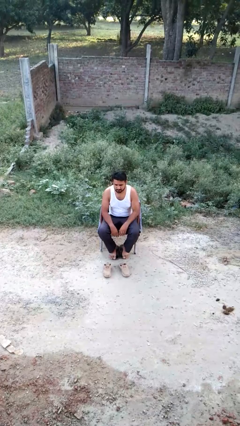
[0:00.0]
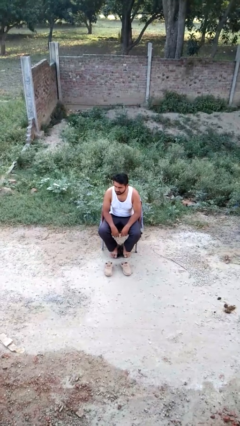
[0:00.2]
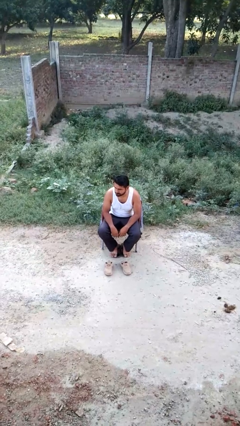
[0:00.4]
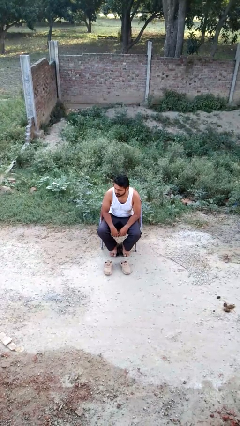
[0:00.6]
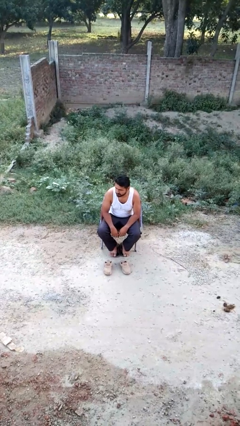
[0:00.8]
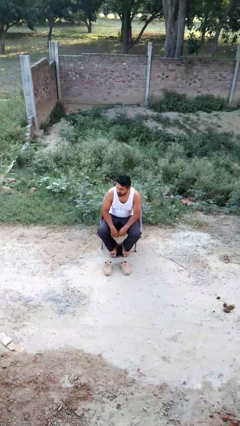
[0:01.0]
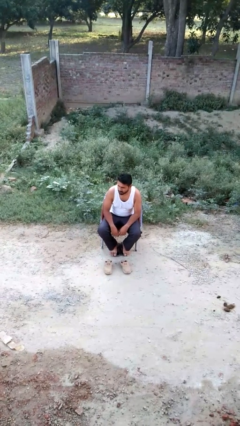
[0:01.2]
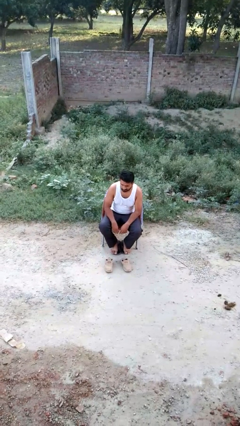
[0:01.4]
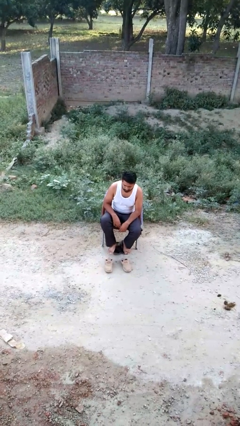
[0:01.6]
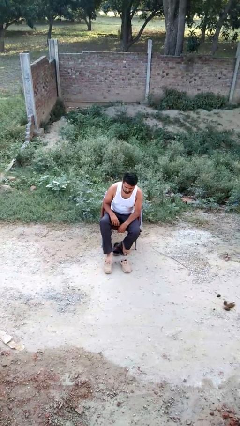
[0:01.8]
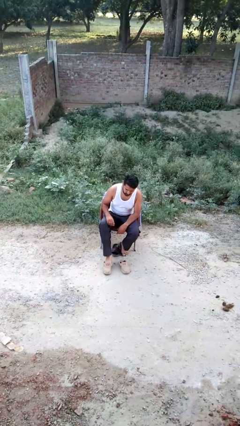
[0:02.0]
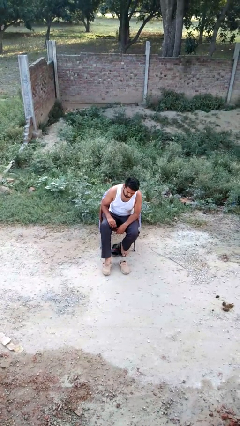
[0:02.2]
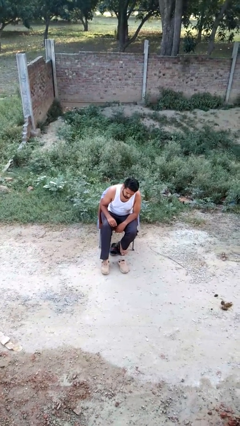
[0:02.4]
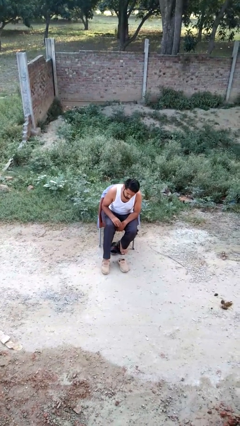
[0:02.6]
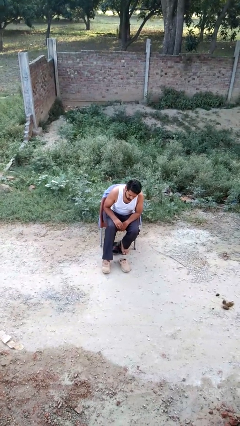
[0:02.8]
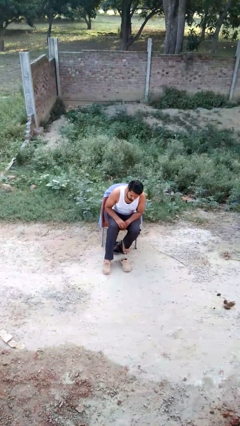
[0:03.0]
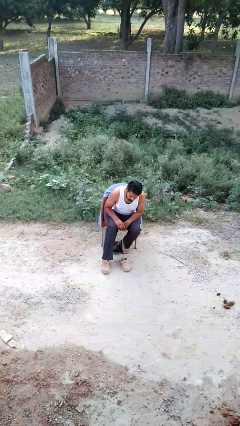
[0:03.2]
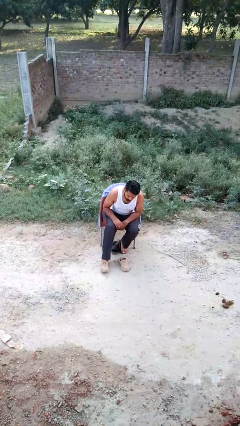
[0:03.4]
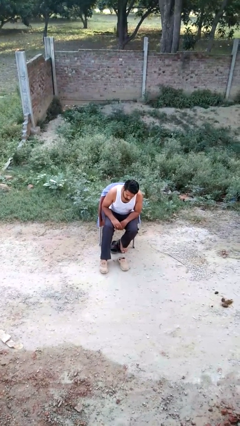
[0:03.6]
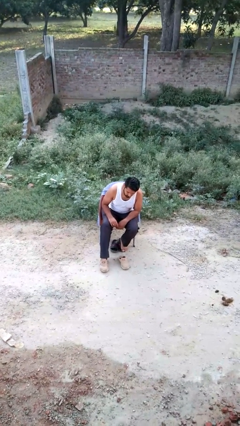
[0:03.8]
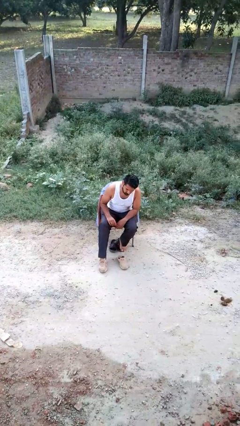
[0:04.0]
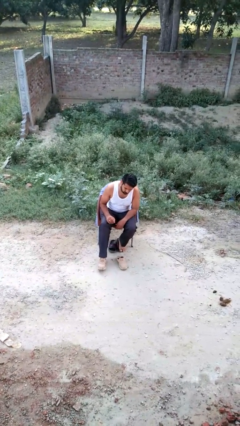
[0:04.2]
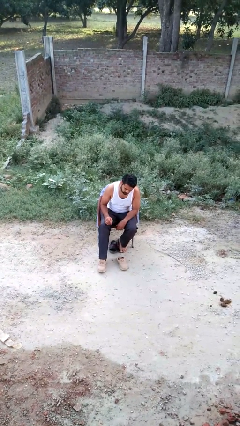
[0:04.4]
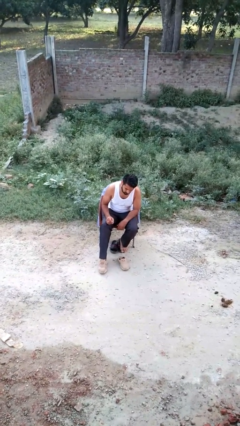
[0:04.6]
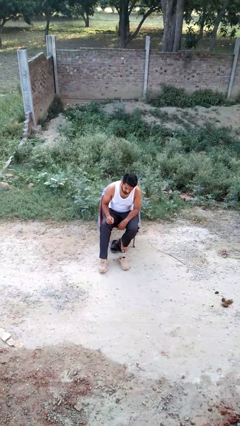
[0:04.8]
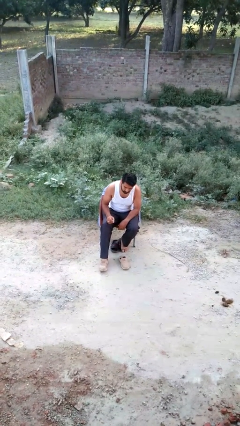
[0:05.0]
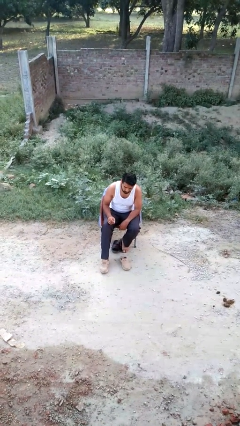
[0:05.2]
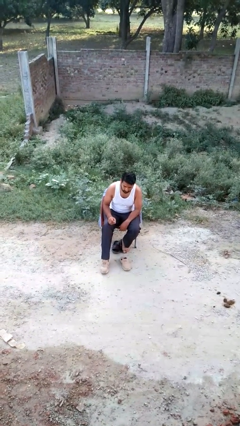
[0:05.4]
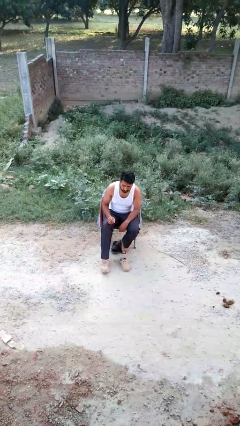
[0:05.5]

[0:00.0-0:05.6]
person puts on shoes

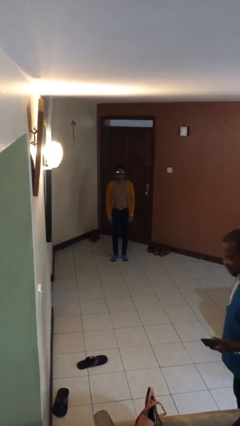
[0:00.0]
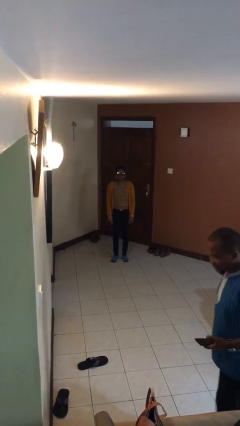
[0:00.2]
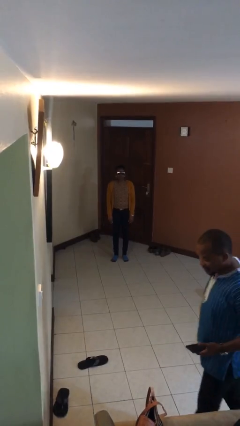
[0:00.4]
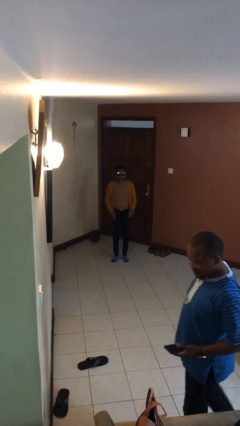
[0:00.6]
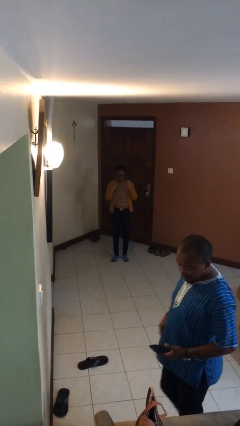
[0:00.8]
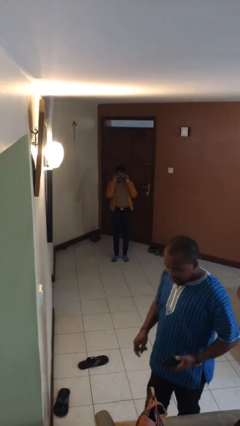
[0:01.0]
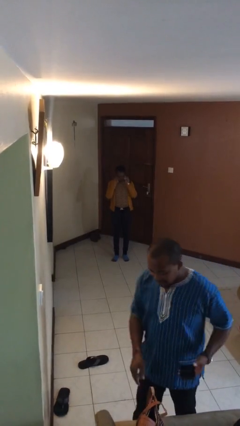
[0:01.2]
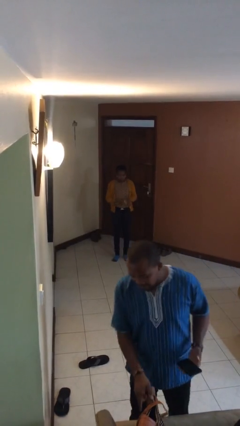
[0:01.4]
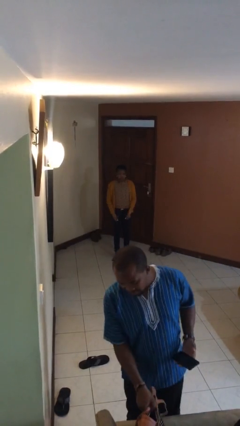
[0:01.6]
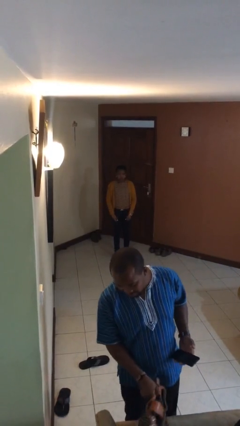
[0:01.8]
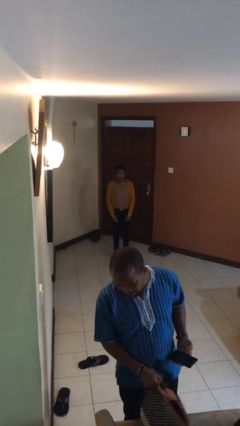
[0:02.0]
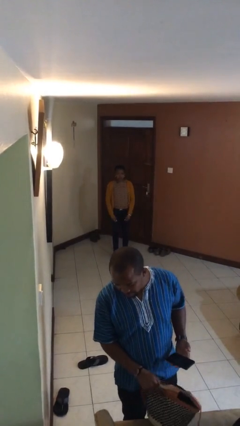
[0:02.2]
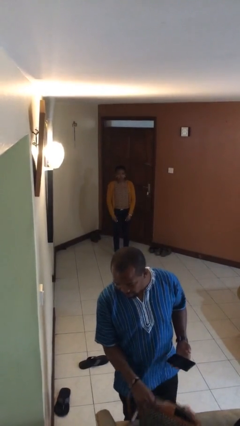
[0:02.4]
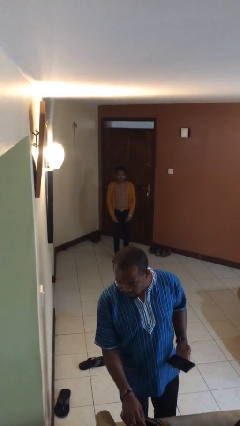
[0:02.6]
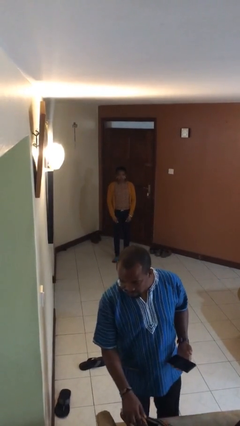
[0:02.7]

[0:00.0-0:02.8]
person takes off sunglasses

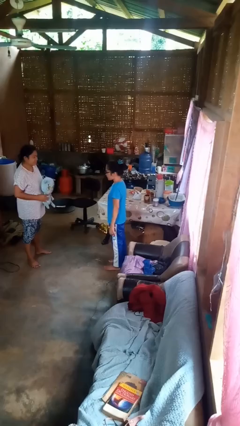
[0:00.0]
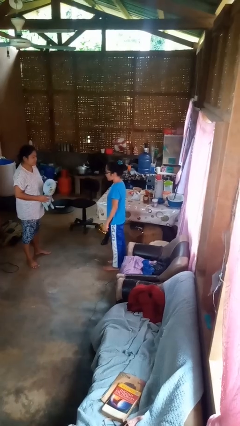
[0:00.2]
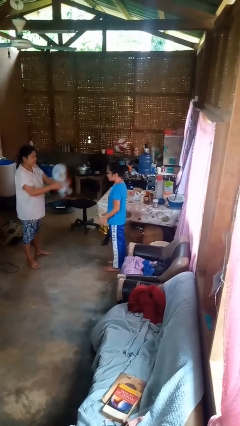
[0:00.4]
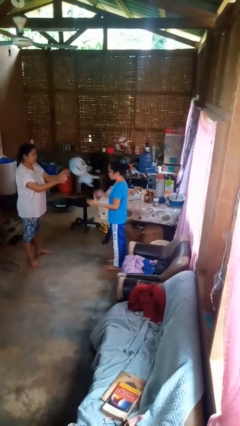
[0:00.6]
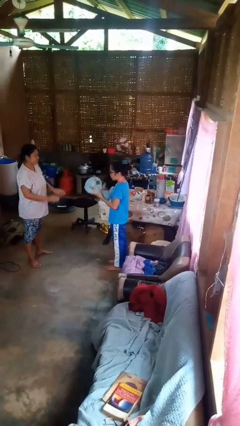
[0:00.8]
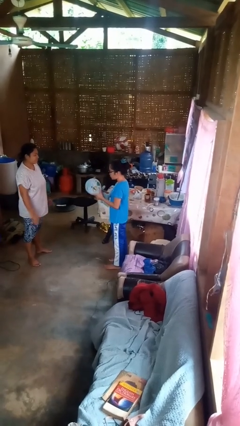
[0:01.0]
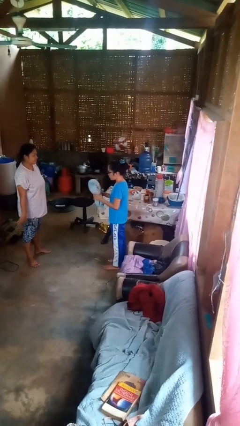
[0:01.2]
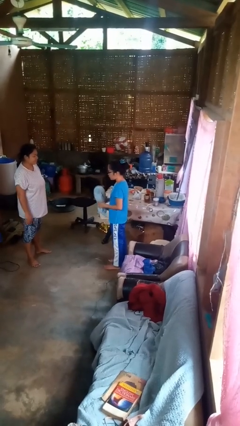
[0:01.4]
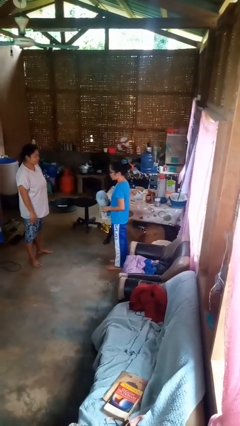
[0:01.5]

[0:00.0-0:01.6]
person catches object from person

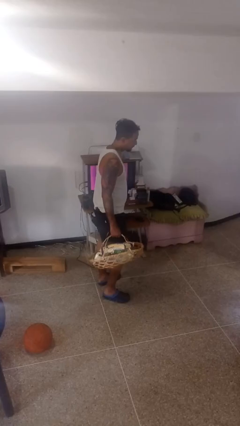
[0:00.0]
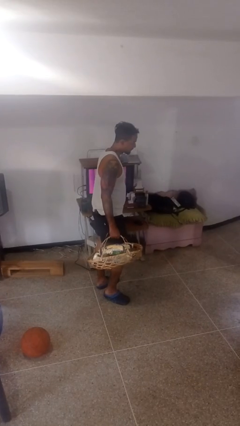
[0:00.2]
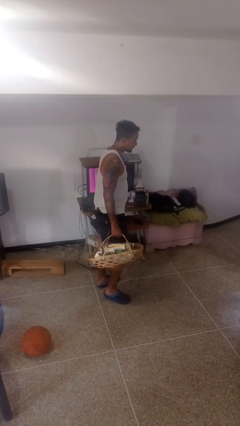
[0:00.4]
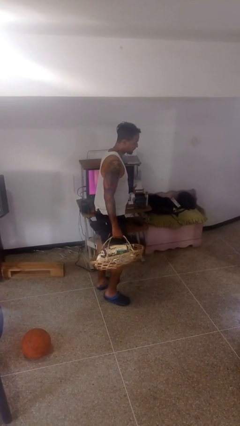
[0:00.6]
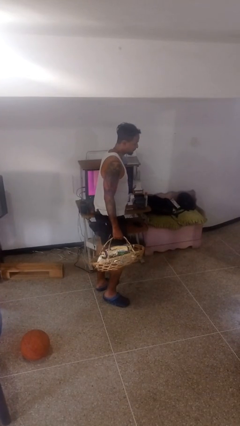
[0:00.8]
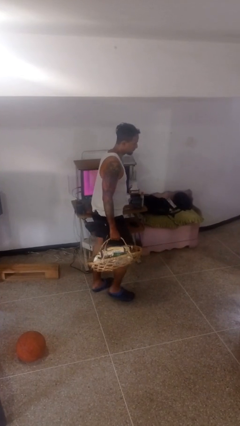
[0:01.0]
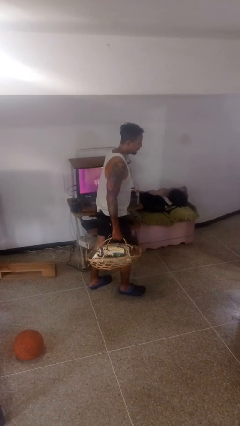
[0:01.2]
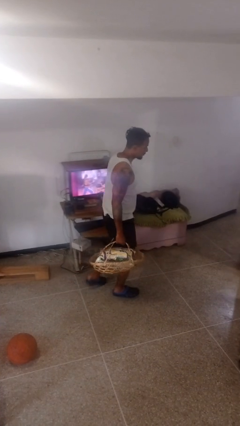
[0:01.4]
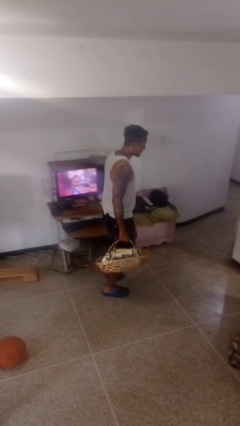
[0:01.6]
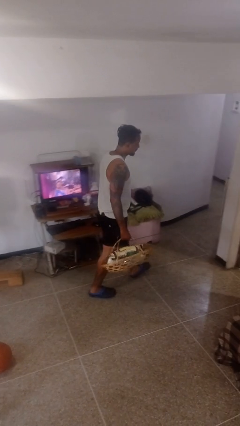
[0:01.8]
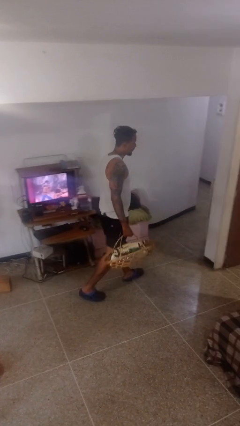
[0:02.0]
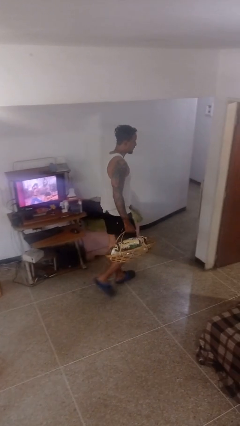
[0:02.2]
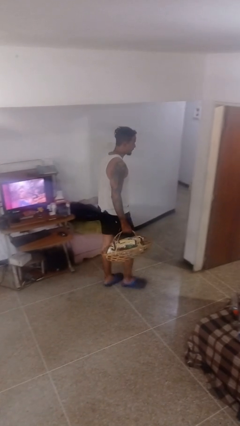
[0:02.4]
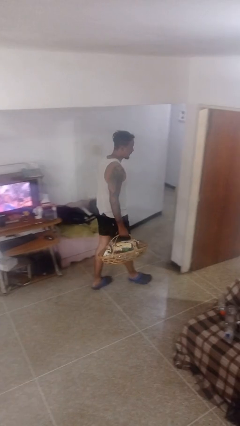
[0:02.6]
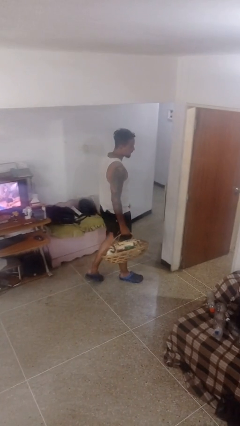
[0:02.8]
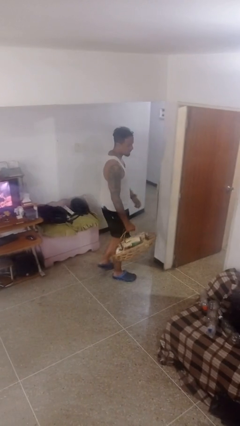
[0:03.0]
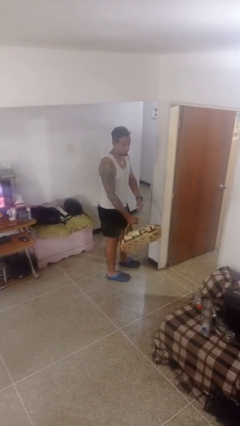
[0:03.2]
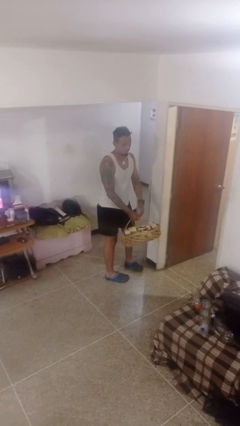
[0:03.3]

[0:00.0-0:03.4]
person carries groceries

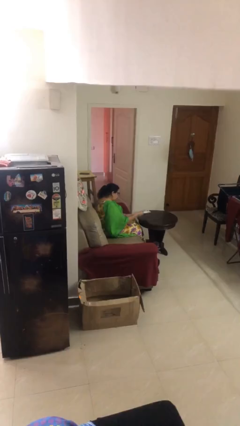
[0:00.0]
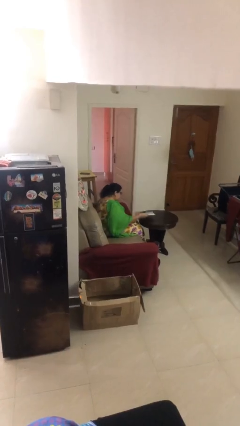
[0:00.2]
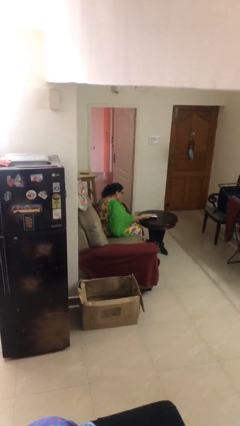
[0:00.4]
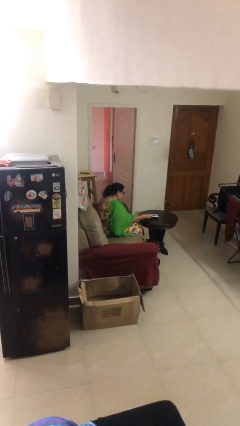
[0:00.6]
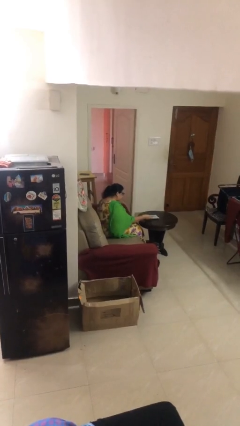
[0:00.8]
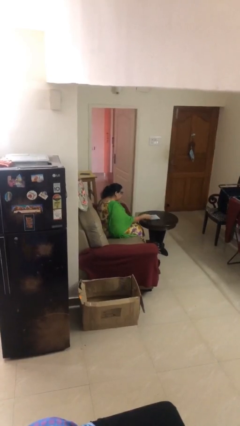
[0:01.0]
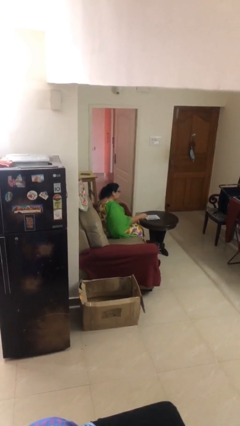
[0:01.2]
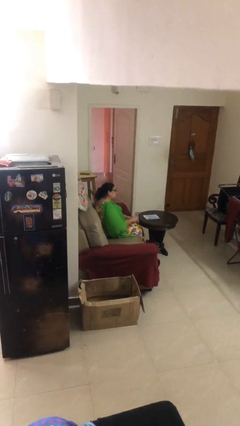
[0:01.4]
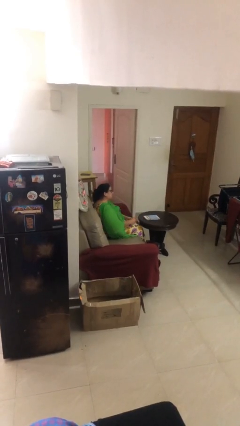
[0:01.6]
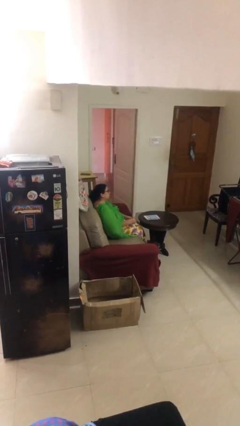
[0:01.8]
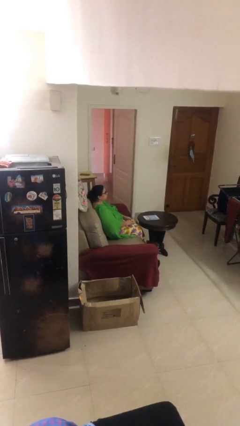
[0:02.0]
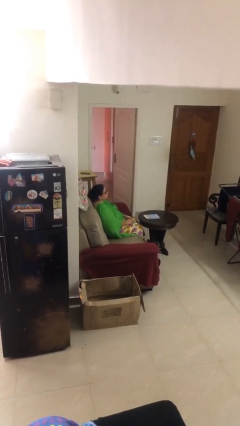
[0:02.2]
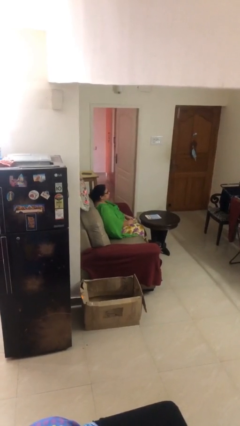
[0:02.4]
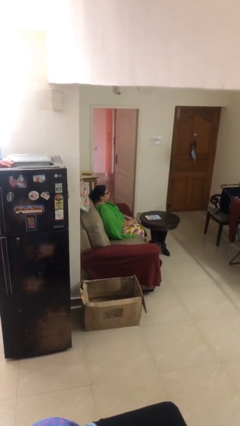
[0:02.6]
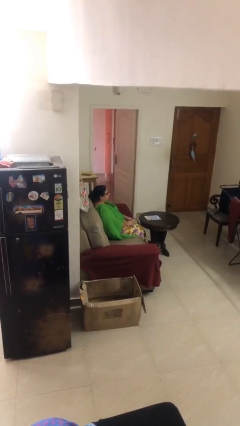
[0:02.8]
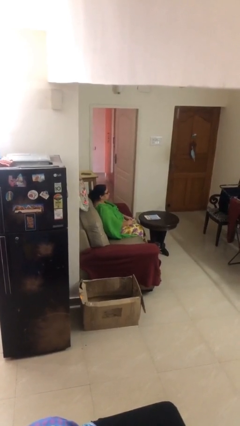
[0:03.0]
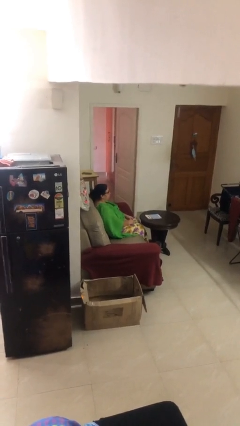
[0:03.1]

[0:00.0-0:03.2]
person puts down object on table

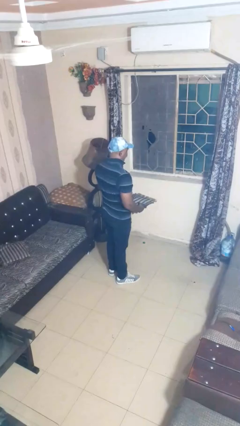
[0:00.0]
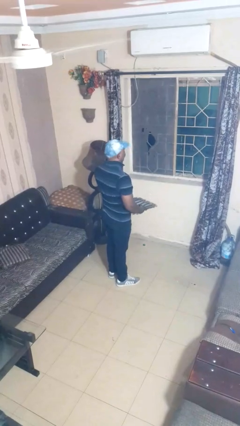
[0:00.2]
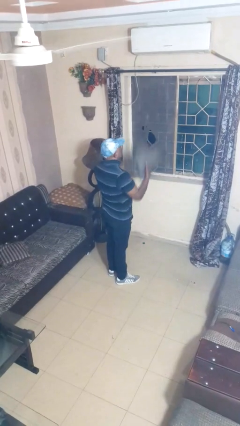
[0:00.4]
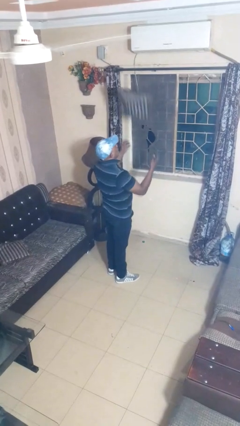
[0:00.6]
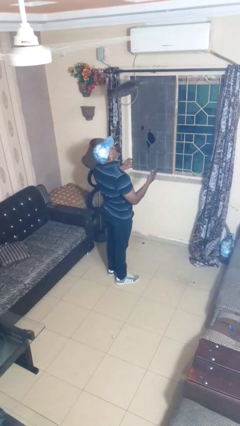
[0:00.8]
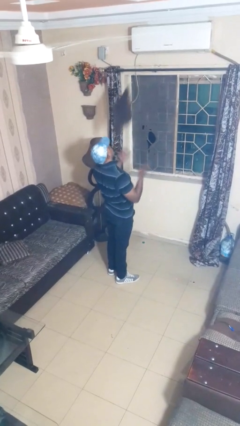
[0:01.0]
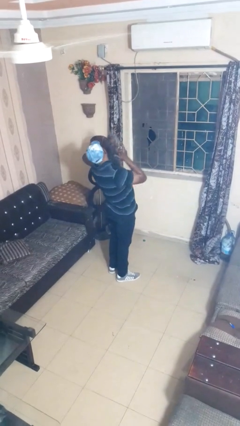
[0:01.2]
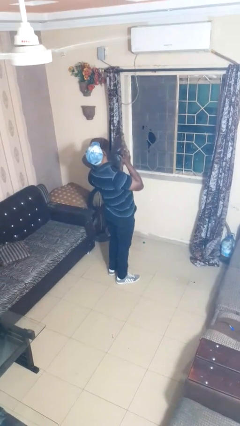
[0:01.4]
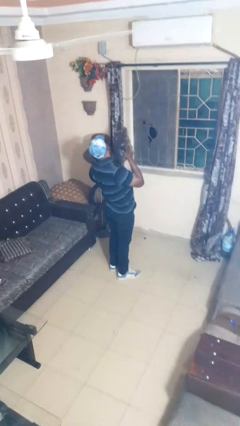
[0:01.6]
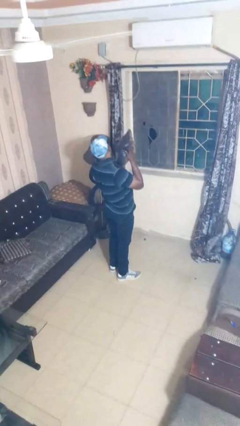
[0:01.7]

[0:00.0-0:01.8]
person drops object
